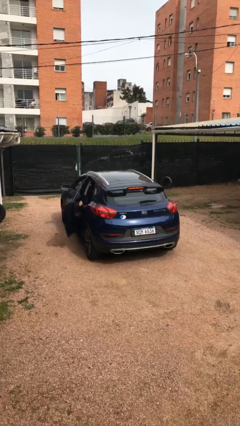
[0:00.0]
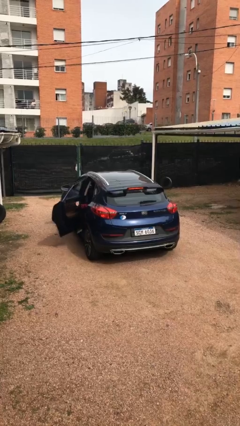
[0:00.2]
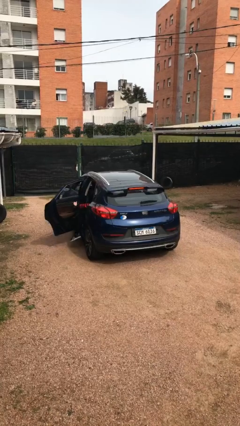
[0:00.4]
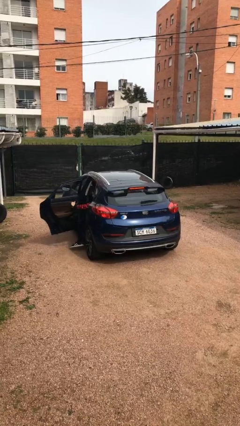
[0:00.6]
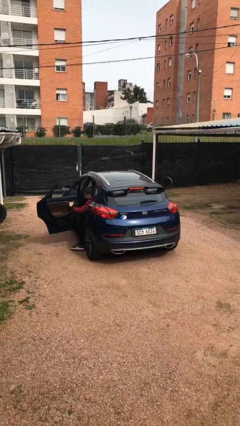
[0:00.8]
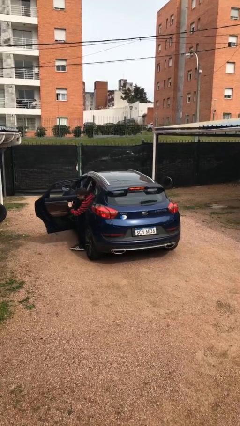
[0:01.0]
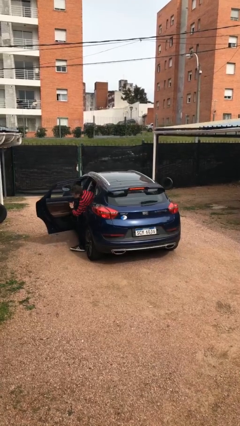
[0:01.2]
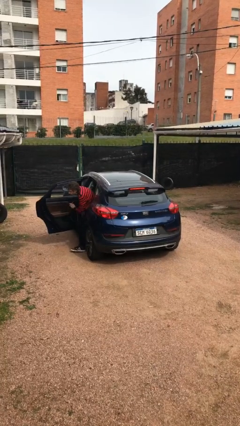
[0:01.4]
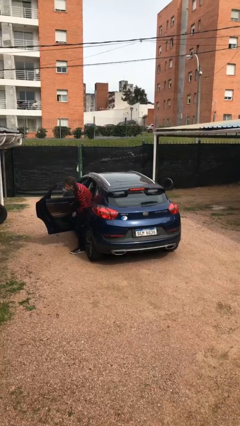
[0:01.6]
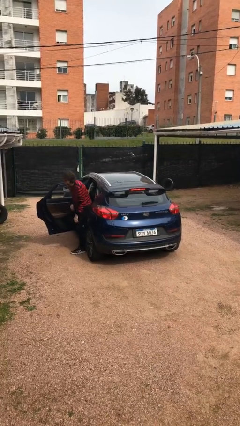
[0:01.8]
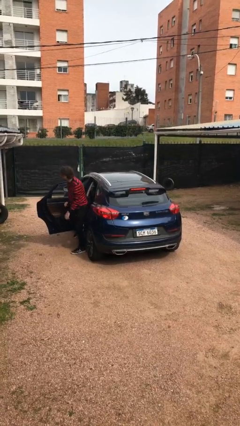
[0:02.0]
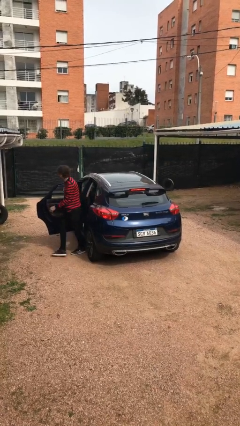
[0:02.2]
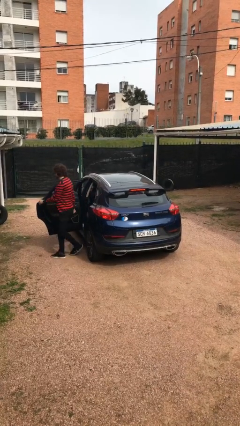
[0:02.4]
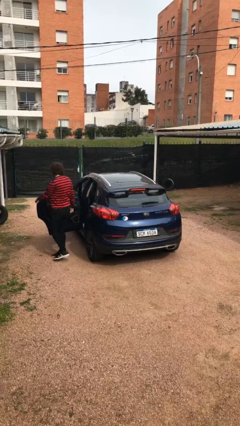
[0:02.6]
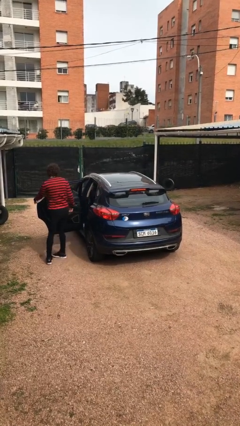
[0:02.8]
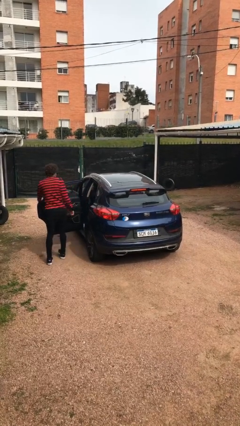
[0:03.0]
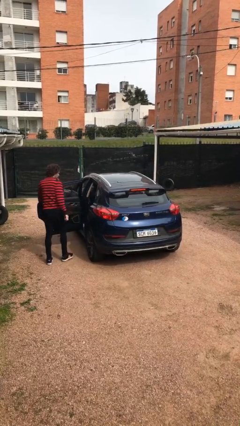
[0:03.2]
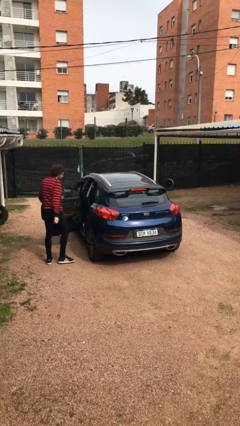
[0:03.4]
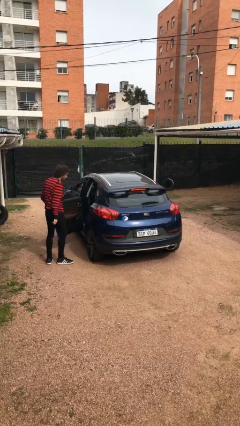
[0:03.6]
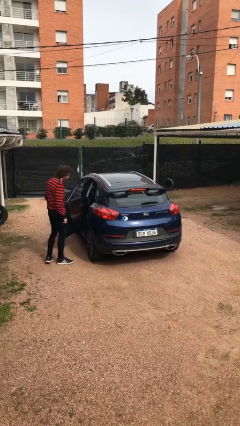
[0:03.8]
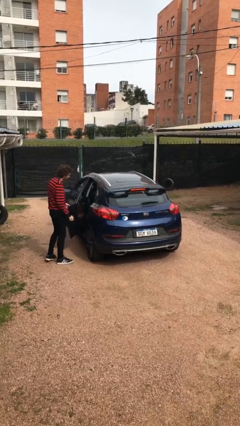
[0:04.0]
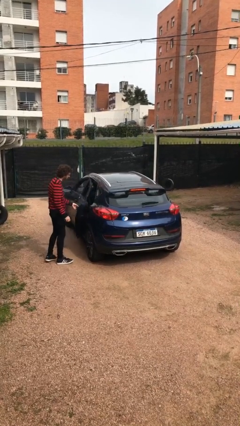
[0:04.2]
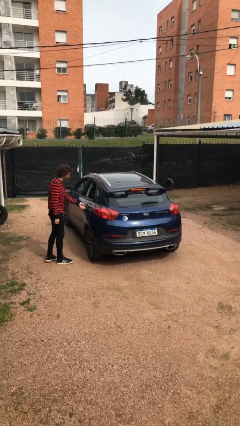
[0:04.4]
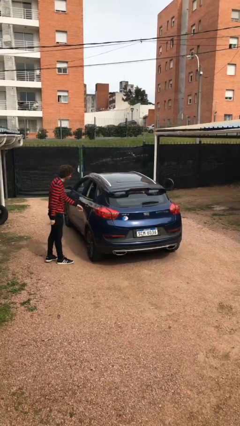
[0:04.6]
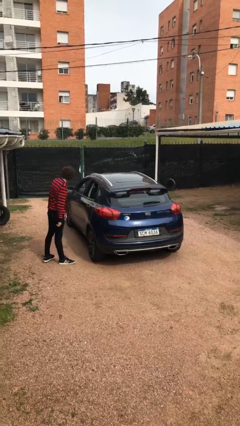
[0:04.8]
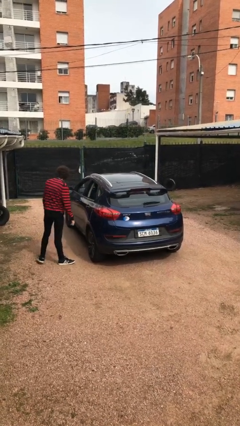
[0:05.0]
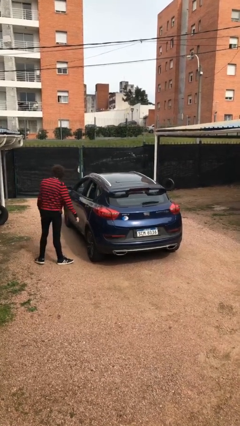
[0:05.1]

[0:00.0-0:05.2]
car drops off person

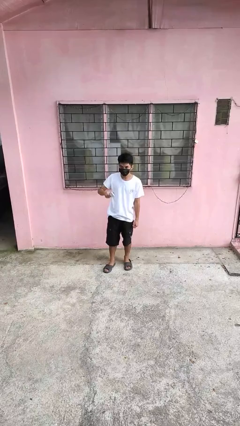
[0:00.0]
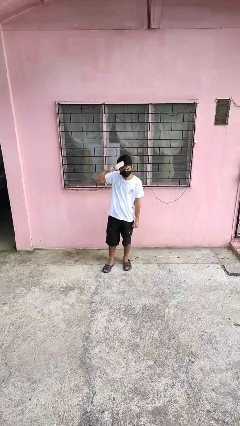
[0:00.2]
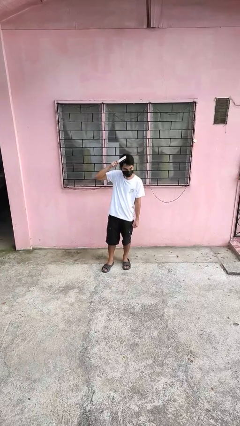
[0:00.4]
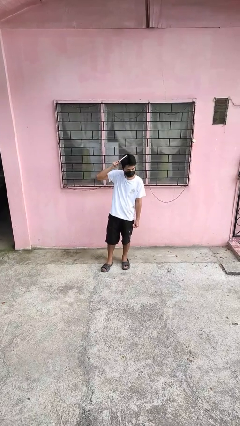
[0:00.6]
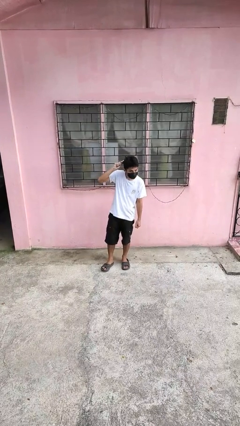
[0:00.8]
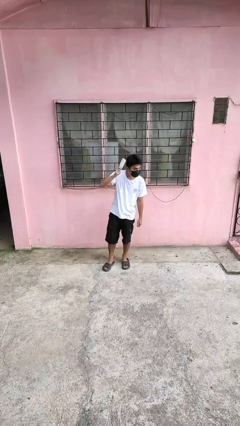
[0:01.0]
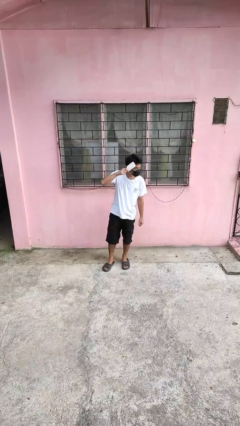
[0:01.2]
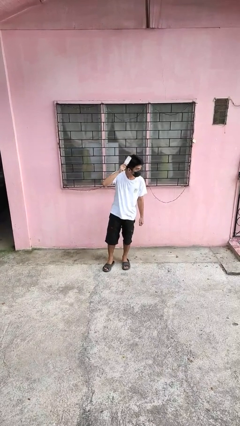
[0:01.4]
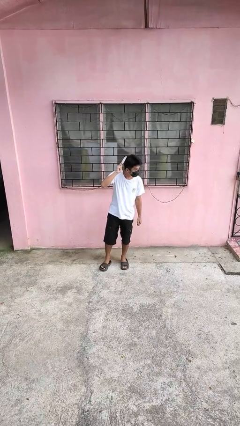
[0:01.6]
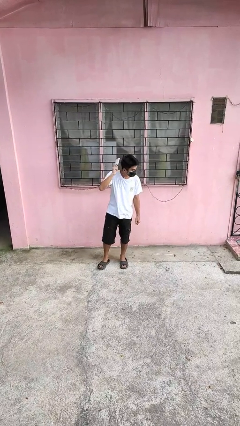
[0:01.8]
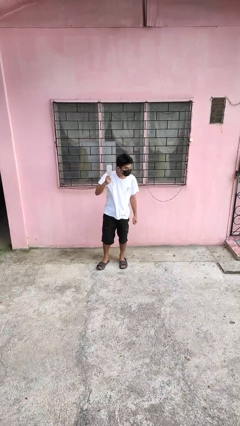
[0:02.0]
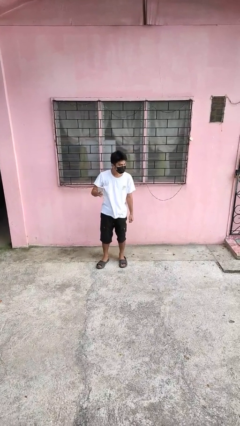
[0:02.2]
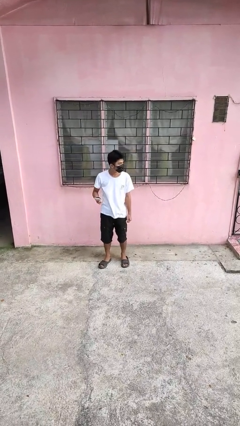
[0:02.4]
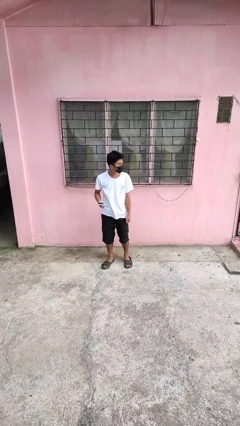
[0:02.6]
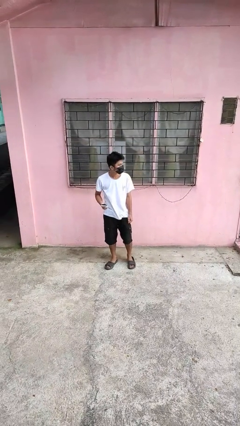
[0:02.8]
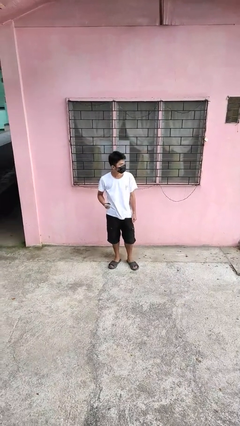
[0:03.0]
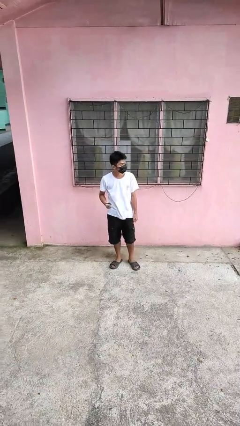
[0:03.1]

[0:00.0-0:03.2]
person brushes hair

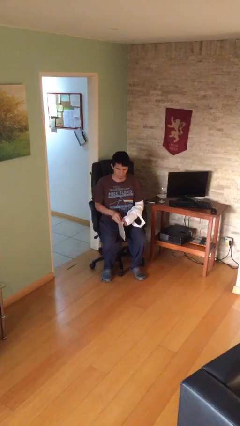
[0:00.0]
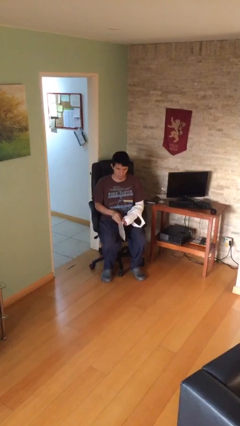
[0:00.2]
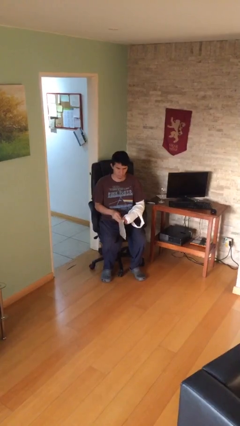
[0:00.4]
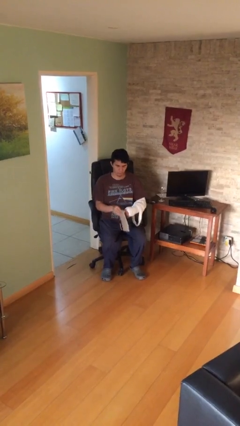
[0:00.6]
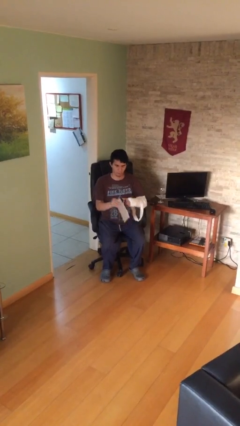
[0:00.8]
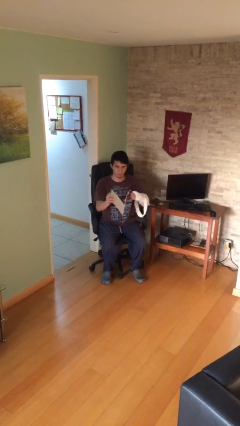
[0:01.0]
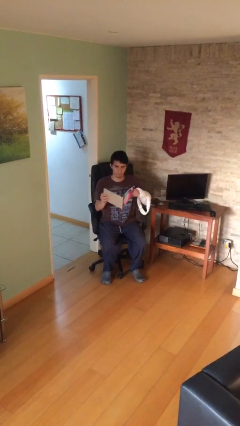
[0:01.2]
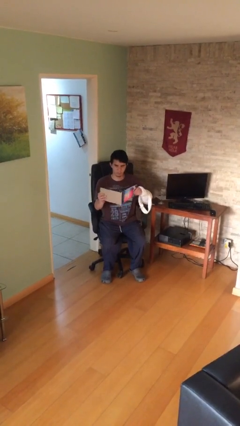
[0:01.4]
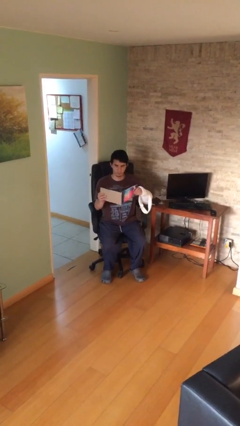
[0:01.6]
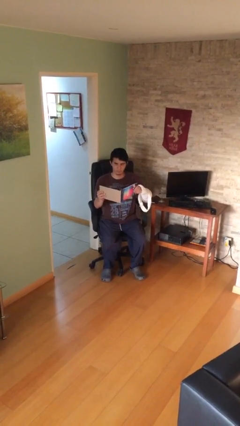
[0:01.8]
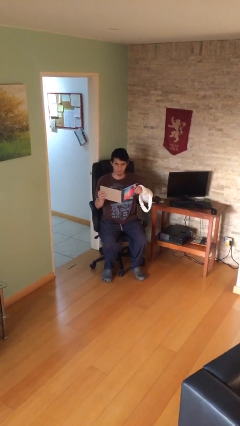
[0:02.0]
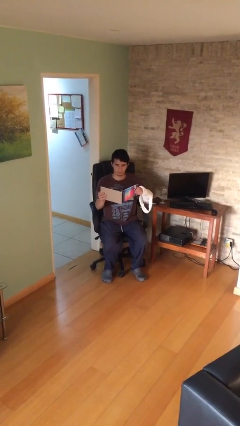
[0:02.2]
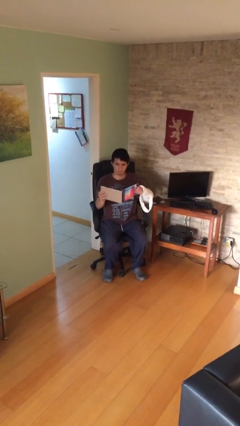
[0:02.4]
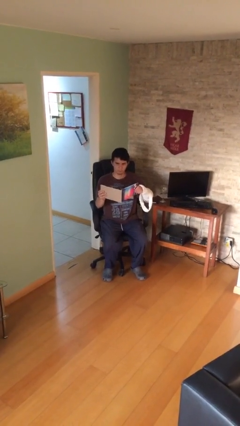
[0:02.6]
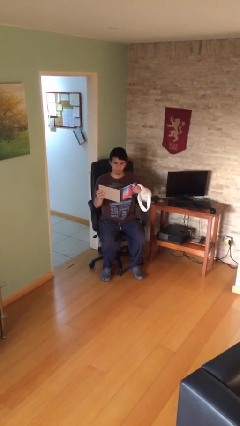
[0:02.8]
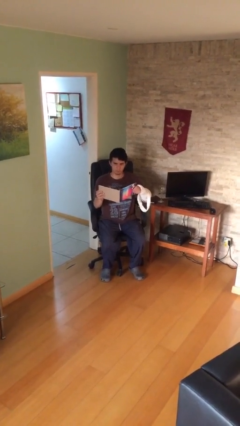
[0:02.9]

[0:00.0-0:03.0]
person reads document

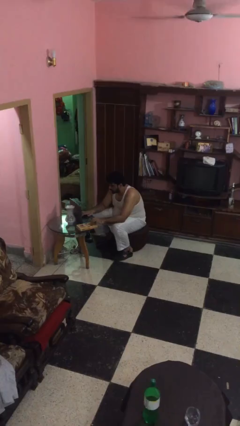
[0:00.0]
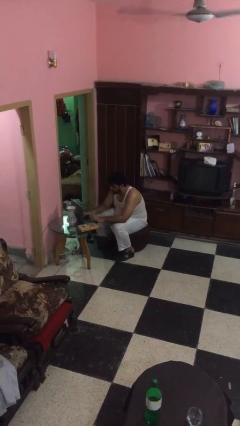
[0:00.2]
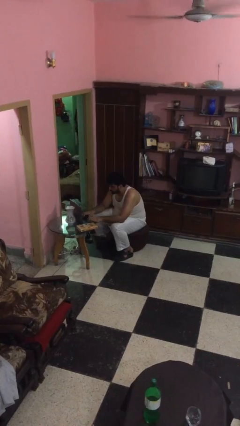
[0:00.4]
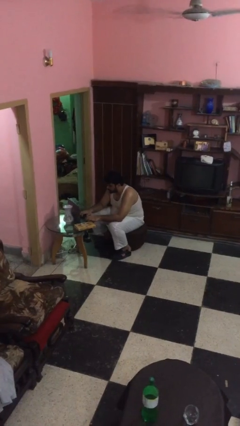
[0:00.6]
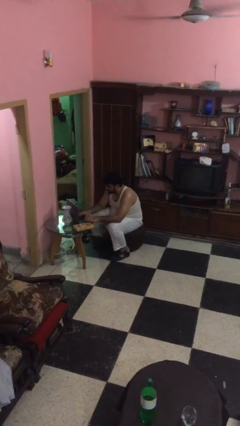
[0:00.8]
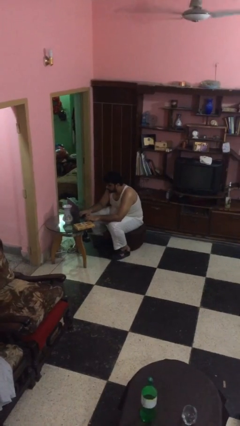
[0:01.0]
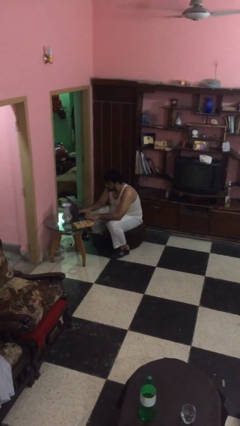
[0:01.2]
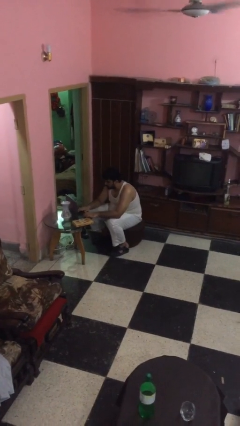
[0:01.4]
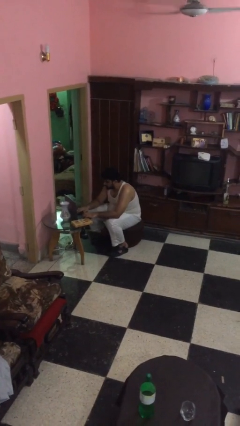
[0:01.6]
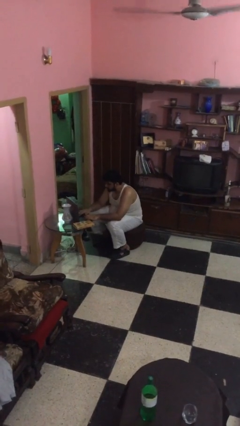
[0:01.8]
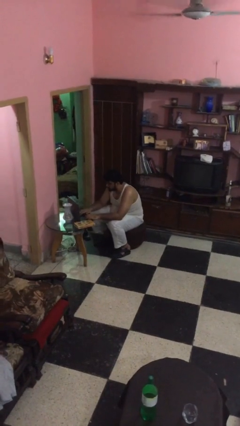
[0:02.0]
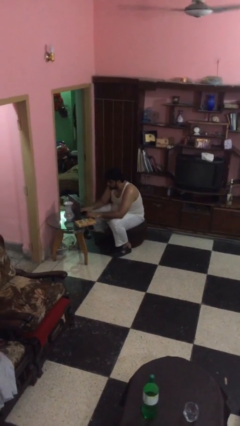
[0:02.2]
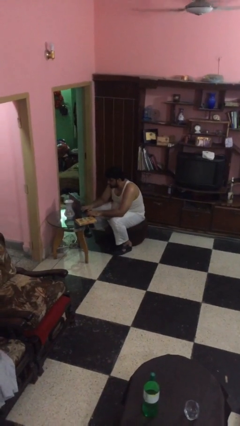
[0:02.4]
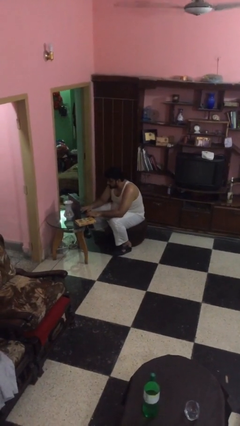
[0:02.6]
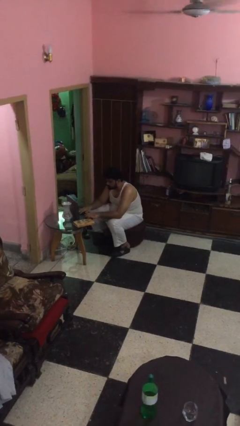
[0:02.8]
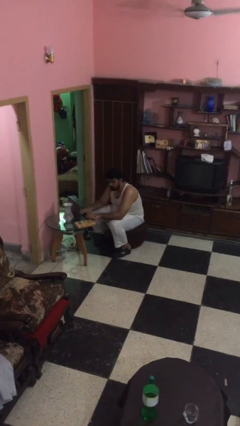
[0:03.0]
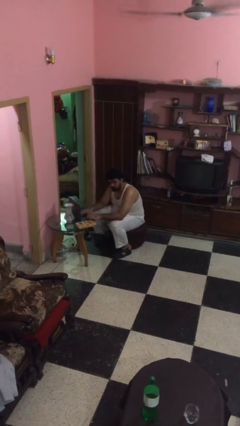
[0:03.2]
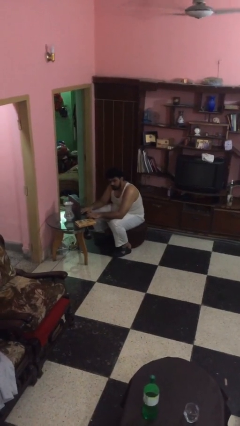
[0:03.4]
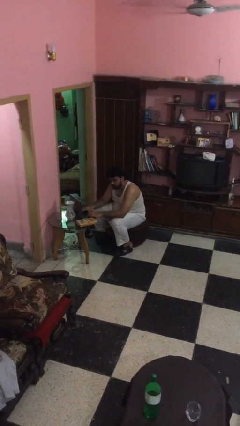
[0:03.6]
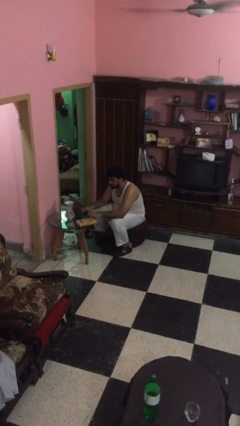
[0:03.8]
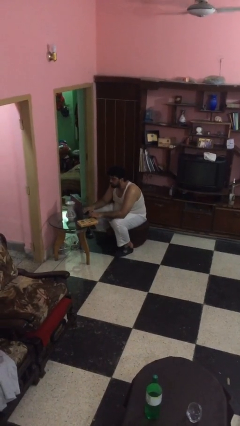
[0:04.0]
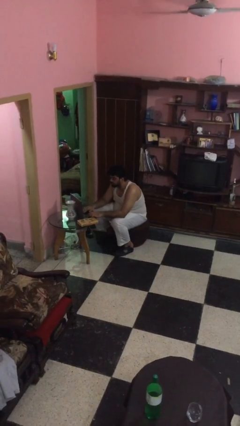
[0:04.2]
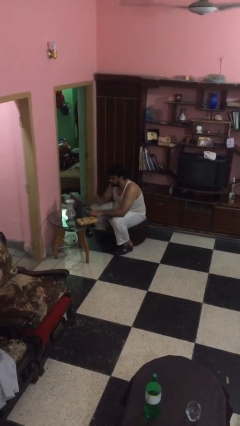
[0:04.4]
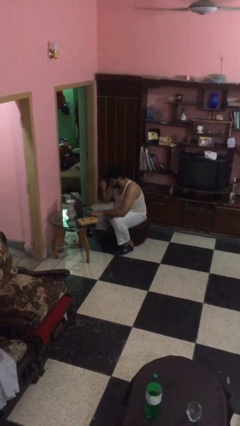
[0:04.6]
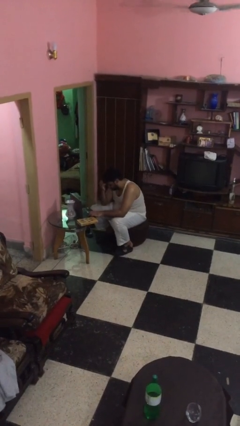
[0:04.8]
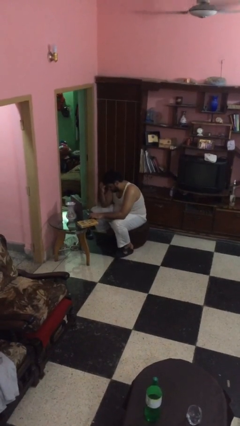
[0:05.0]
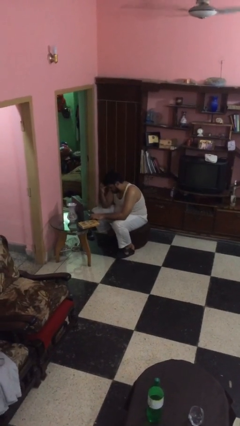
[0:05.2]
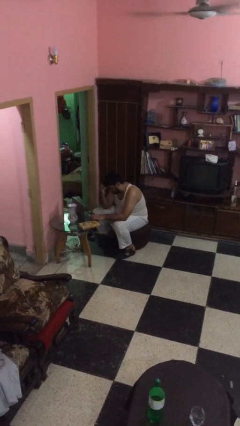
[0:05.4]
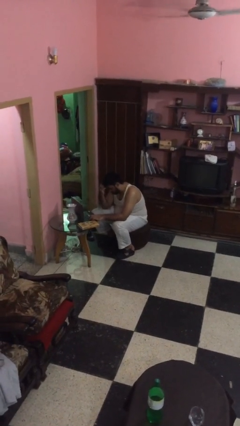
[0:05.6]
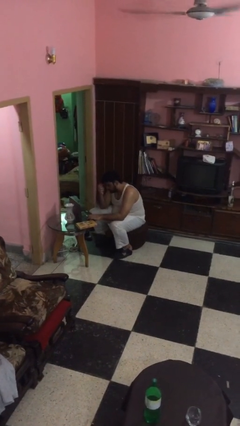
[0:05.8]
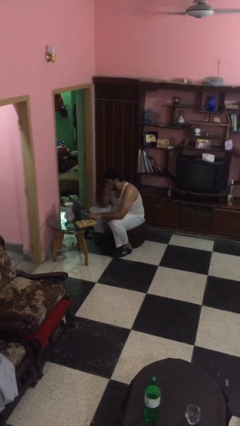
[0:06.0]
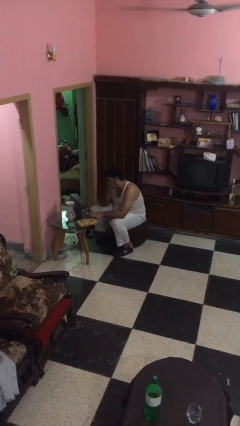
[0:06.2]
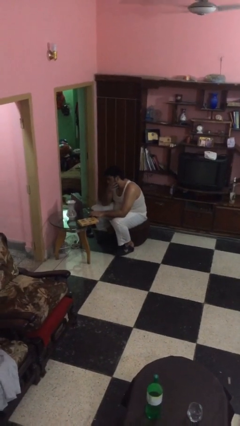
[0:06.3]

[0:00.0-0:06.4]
person interacts with laptop
